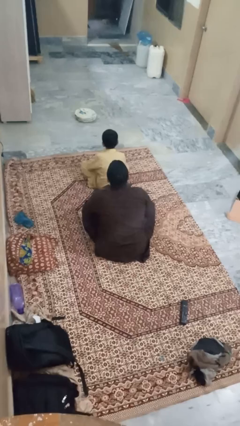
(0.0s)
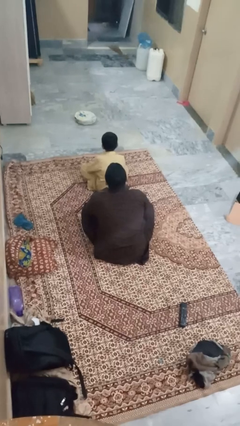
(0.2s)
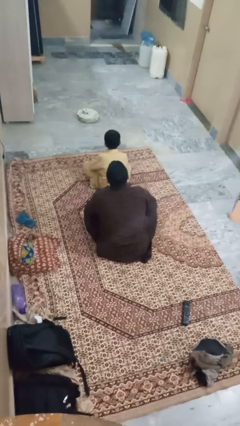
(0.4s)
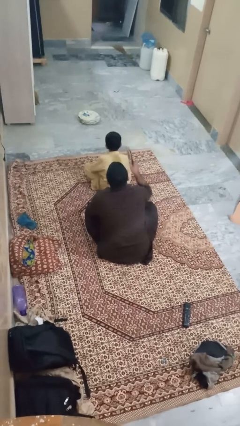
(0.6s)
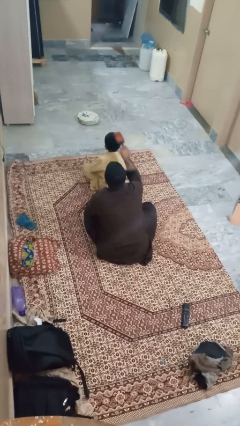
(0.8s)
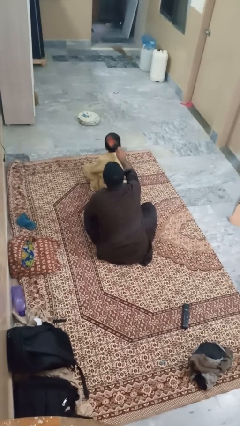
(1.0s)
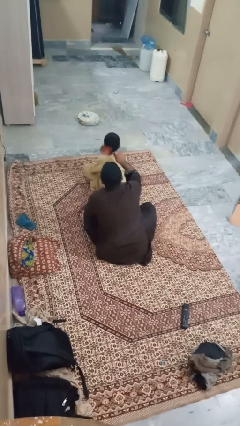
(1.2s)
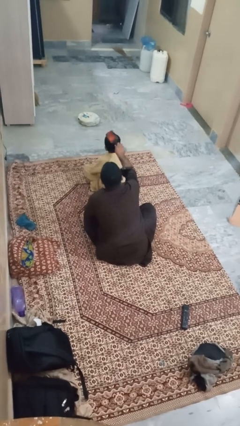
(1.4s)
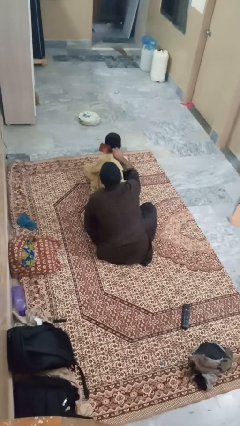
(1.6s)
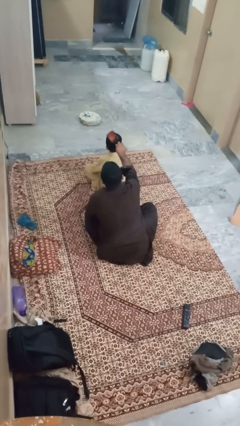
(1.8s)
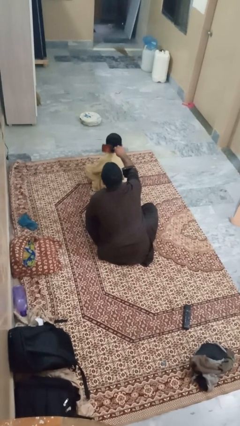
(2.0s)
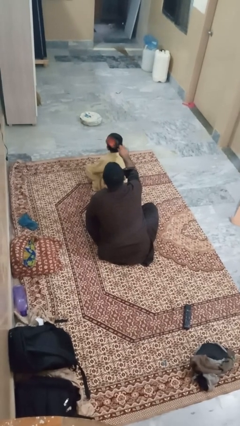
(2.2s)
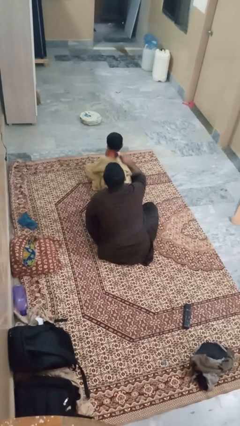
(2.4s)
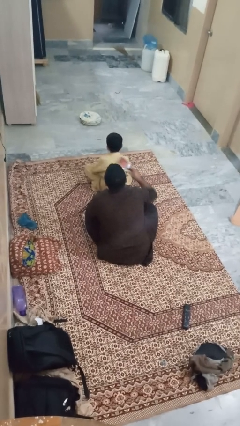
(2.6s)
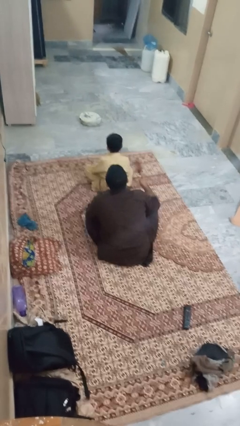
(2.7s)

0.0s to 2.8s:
person brushes hair of person

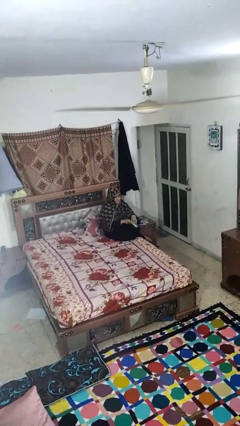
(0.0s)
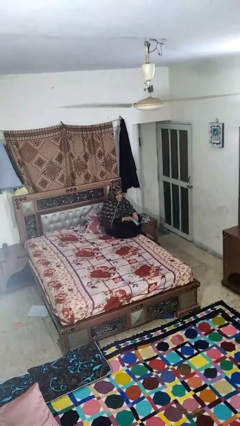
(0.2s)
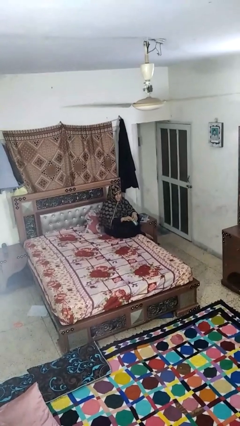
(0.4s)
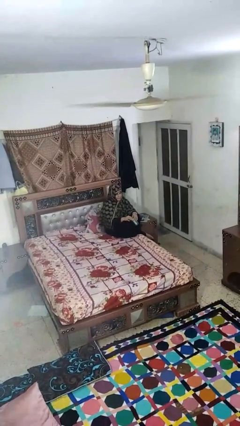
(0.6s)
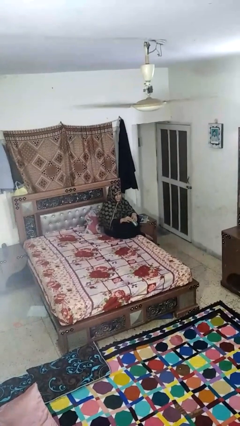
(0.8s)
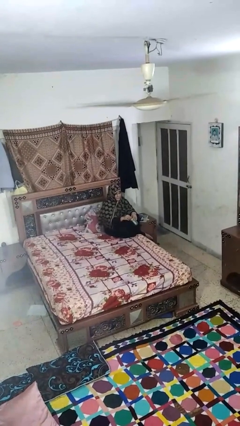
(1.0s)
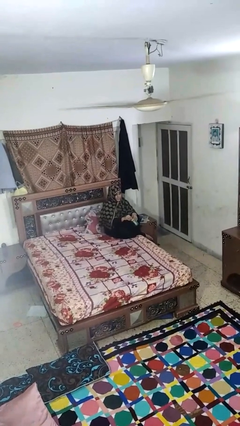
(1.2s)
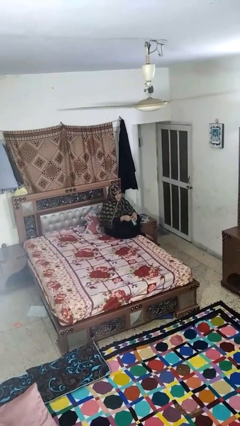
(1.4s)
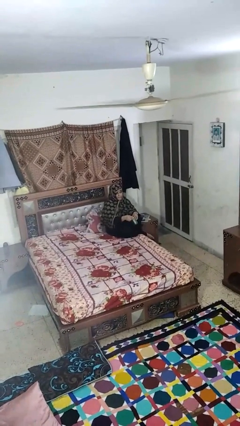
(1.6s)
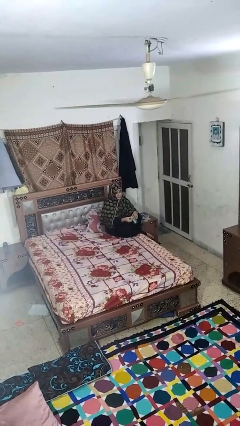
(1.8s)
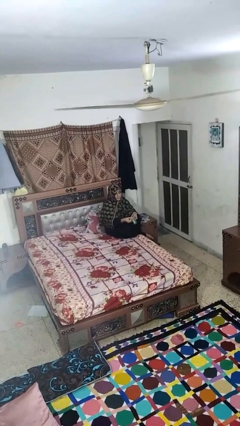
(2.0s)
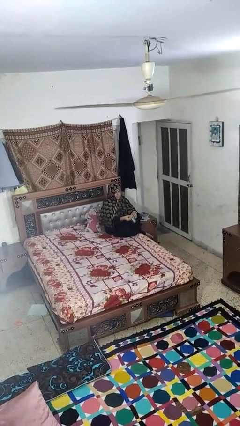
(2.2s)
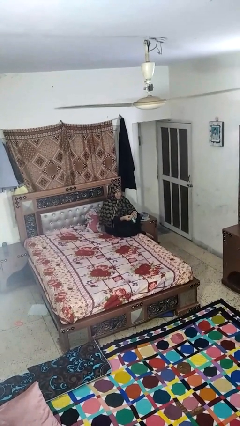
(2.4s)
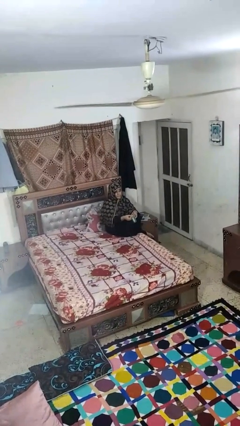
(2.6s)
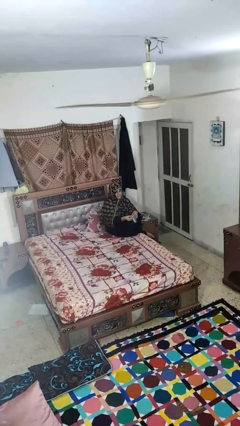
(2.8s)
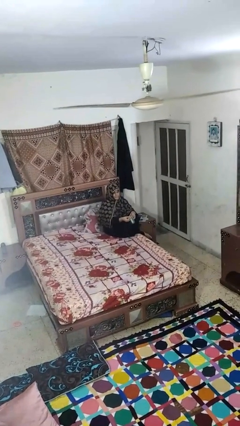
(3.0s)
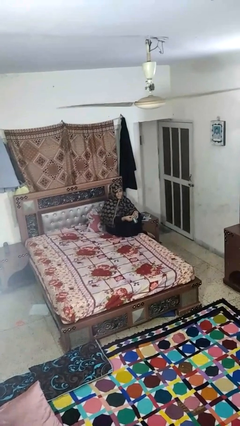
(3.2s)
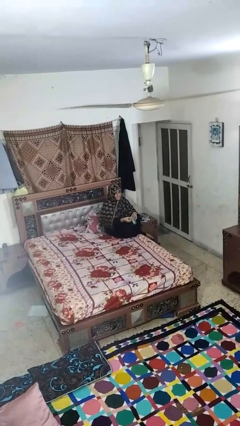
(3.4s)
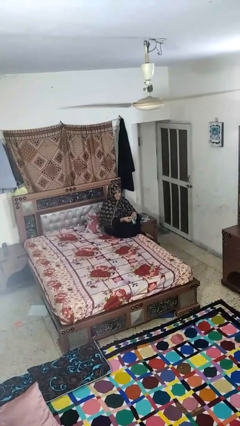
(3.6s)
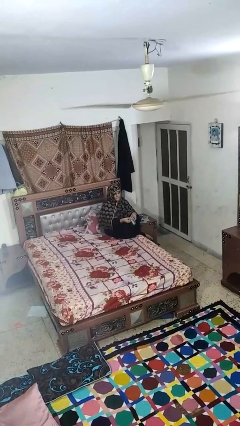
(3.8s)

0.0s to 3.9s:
person opens beverage can

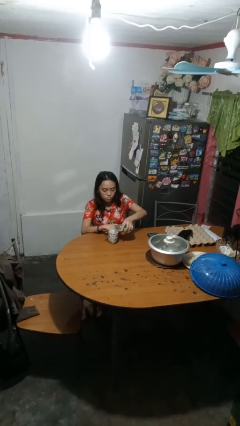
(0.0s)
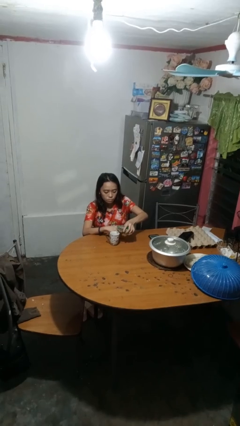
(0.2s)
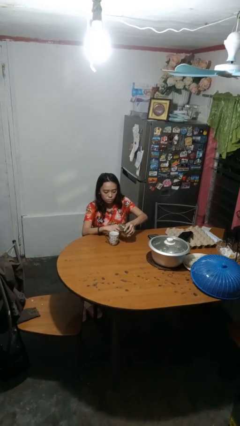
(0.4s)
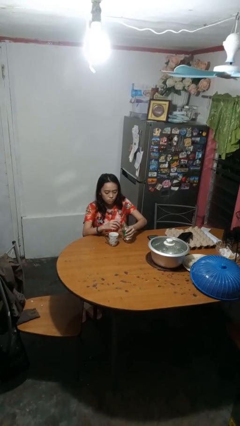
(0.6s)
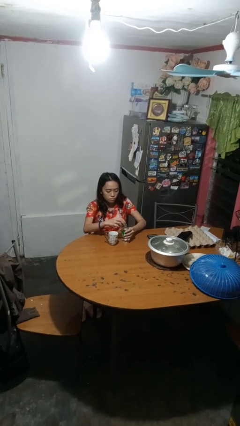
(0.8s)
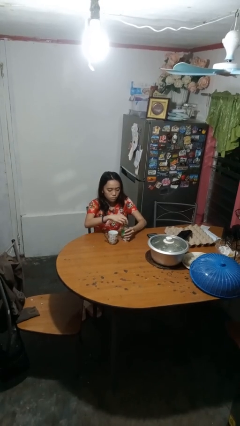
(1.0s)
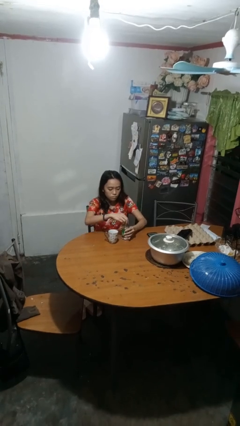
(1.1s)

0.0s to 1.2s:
person screws lid to bottle

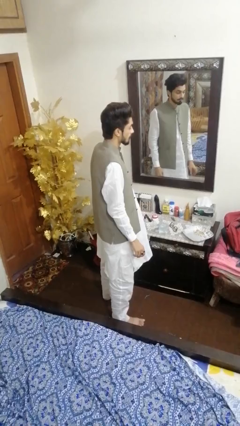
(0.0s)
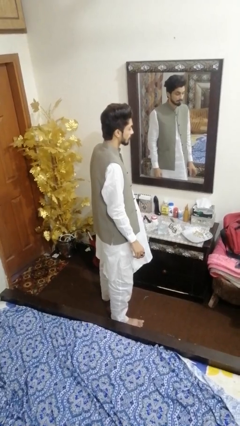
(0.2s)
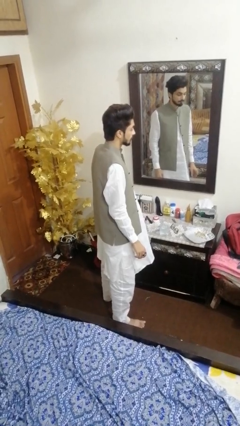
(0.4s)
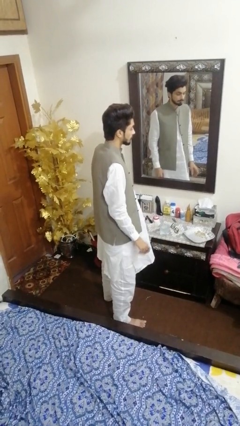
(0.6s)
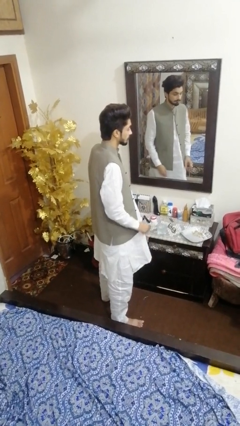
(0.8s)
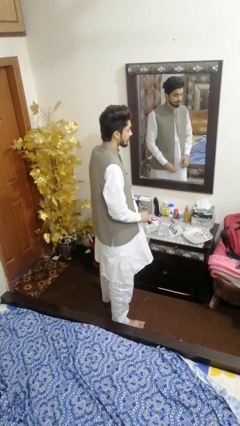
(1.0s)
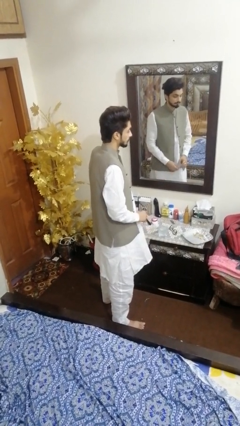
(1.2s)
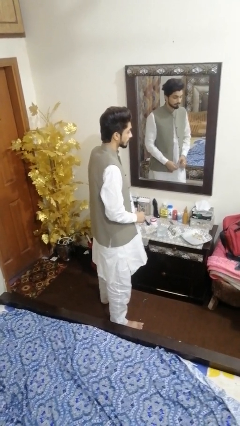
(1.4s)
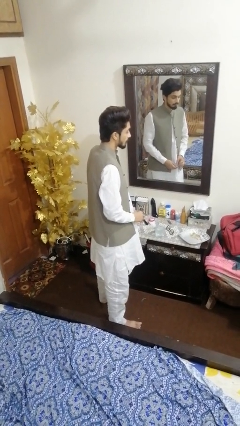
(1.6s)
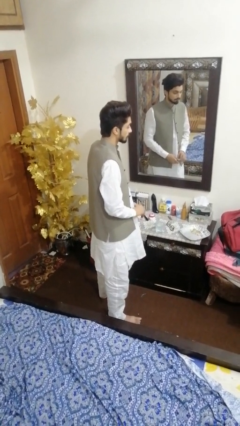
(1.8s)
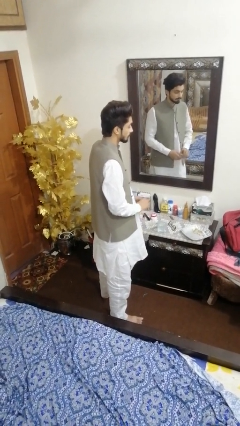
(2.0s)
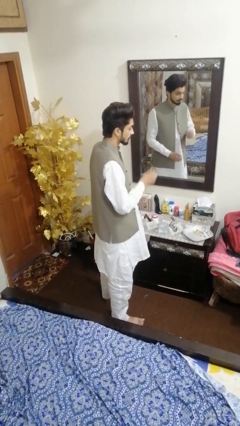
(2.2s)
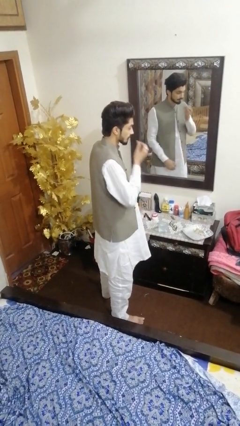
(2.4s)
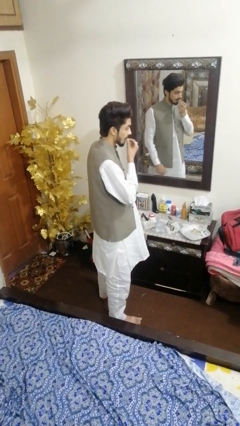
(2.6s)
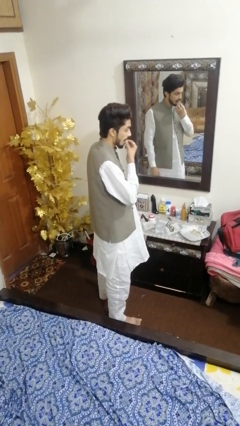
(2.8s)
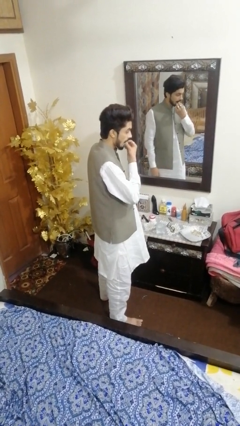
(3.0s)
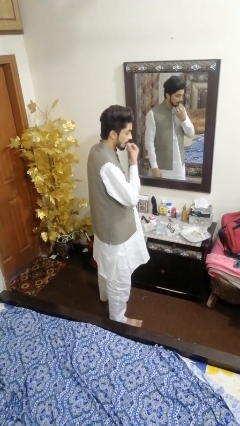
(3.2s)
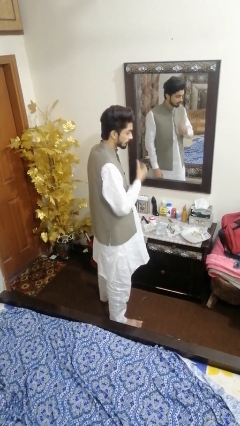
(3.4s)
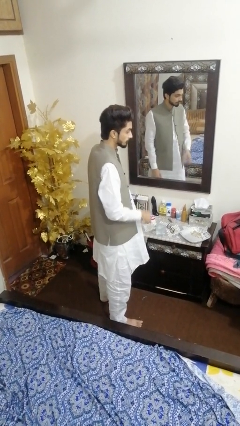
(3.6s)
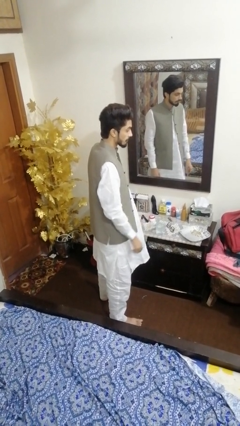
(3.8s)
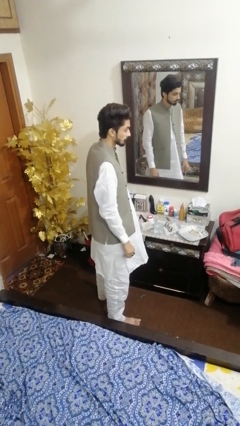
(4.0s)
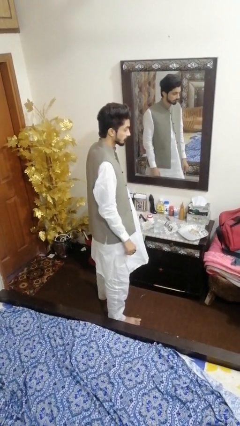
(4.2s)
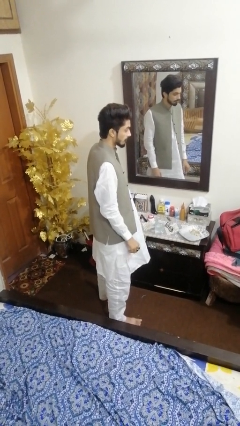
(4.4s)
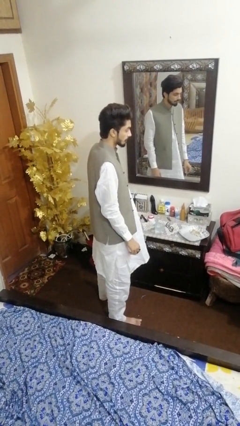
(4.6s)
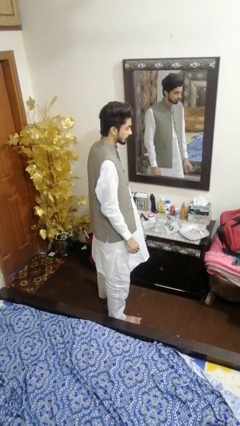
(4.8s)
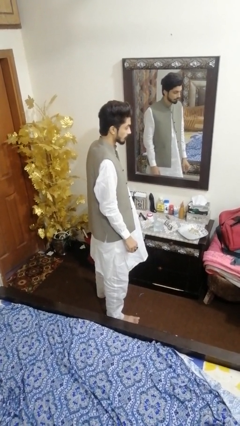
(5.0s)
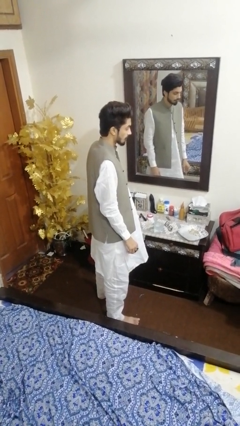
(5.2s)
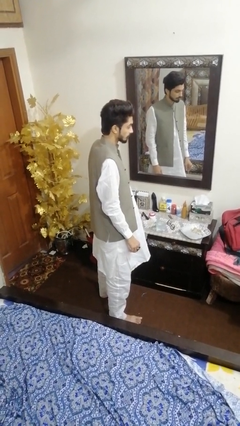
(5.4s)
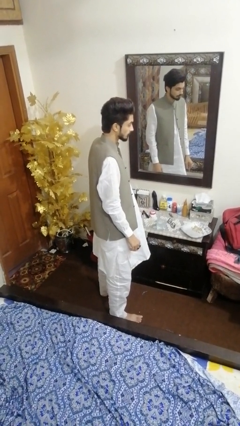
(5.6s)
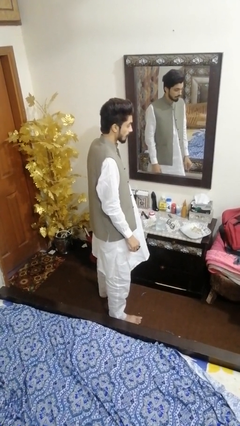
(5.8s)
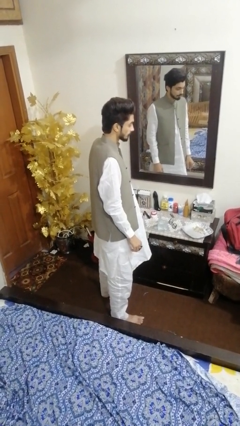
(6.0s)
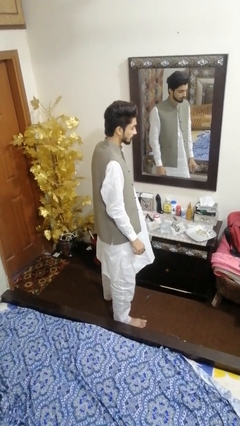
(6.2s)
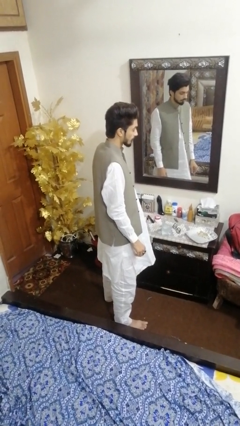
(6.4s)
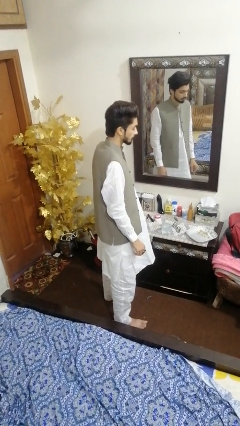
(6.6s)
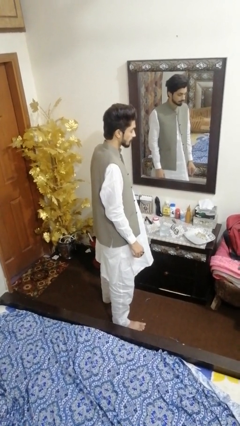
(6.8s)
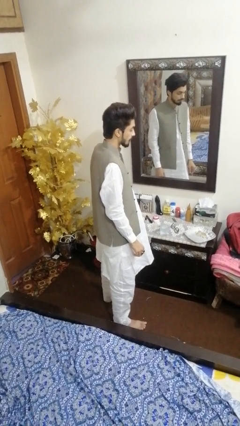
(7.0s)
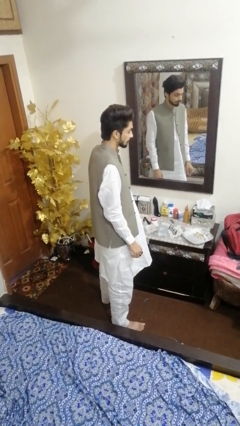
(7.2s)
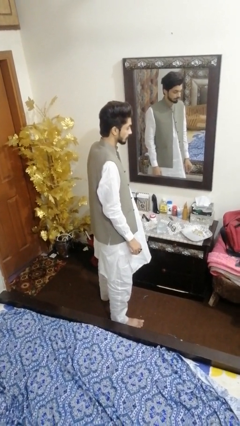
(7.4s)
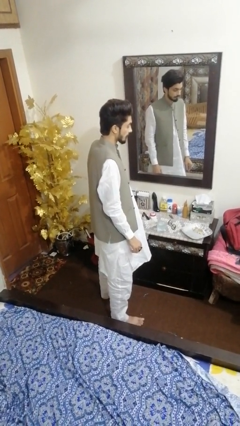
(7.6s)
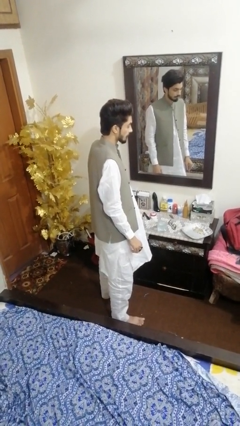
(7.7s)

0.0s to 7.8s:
person takes medicine pills

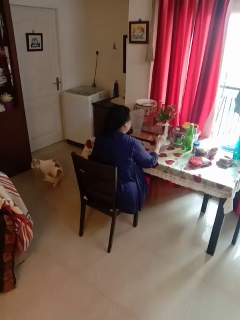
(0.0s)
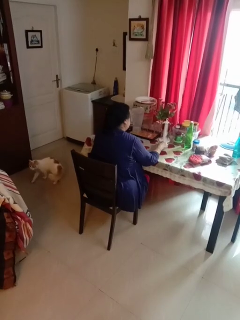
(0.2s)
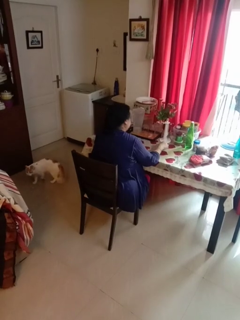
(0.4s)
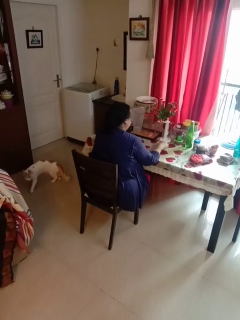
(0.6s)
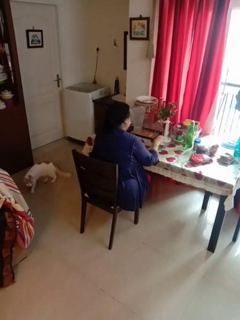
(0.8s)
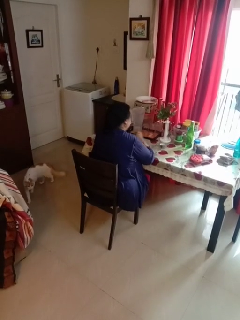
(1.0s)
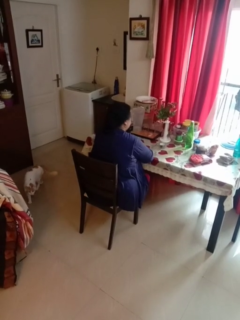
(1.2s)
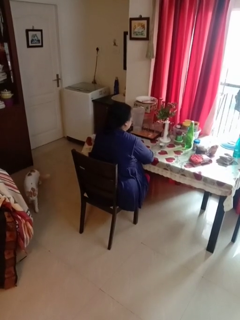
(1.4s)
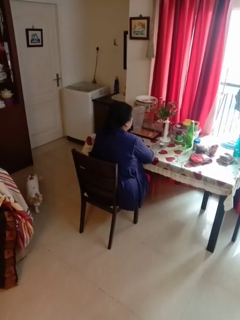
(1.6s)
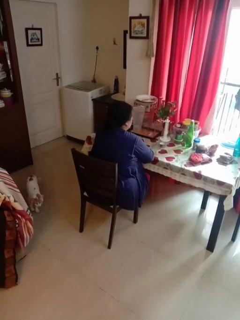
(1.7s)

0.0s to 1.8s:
person puts down object on table

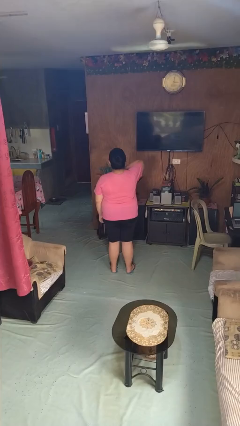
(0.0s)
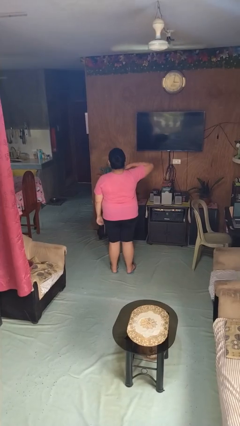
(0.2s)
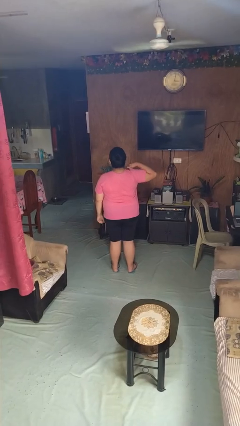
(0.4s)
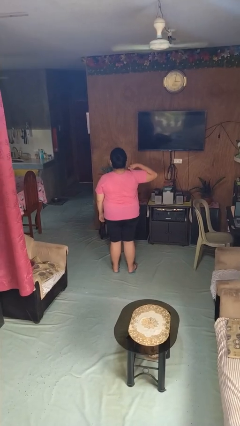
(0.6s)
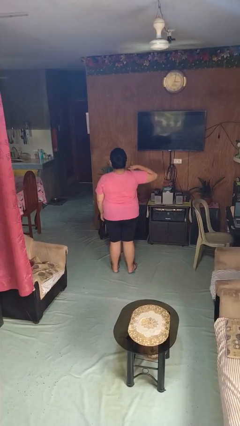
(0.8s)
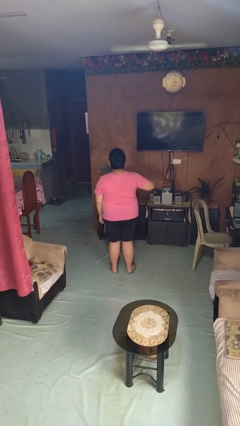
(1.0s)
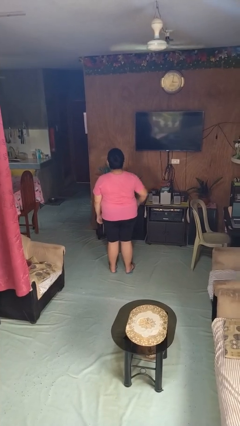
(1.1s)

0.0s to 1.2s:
person gestures cut
